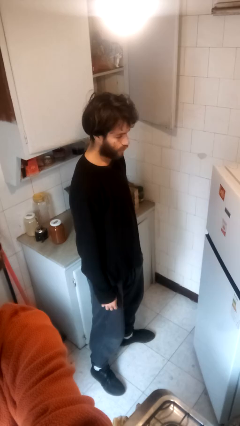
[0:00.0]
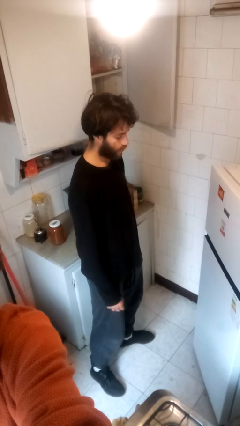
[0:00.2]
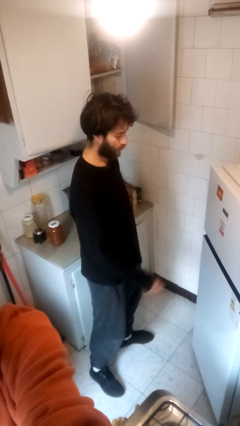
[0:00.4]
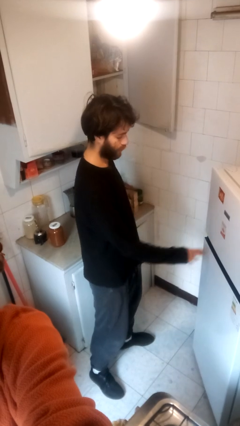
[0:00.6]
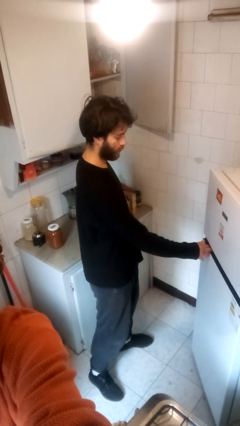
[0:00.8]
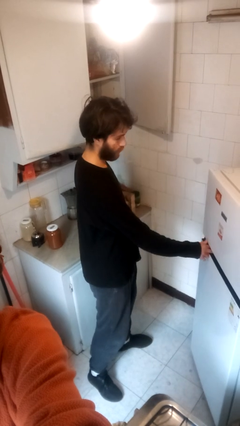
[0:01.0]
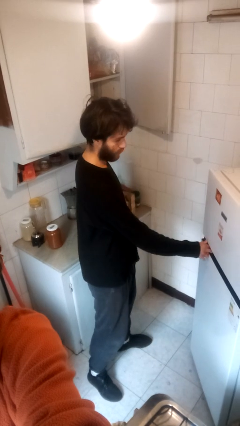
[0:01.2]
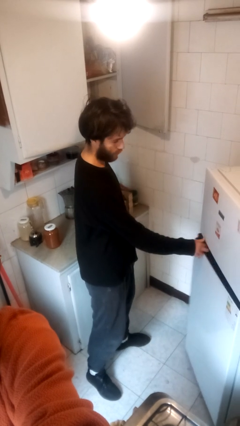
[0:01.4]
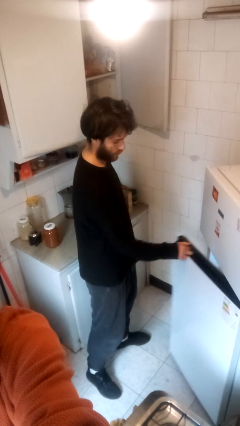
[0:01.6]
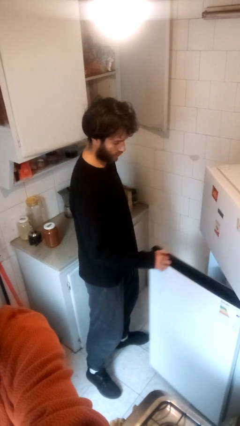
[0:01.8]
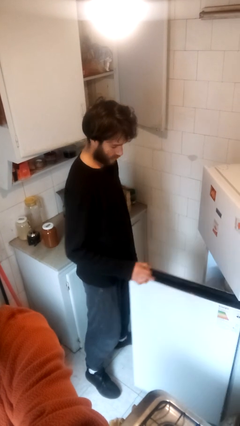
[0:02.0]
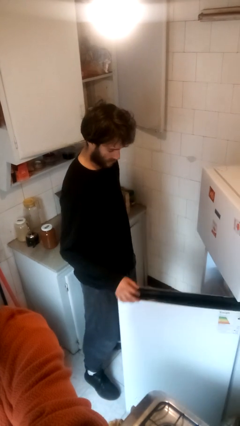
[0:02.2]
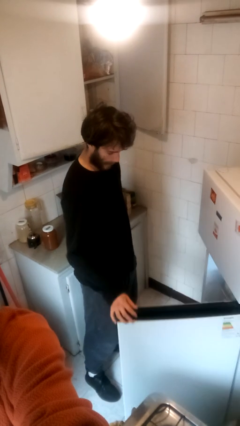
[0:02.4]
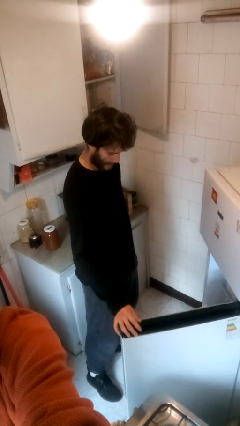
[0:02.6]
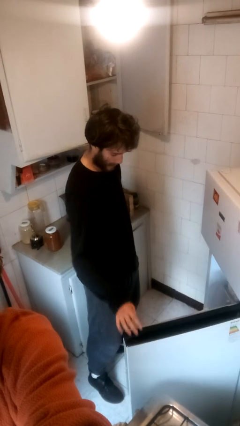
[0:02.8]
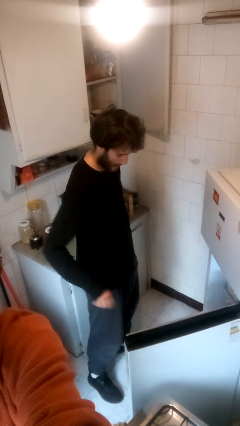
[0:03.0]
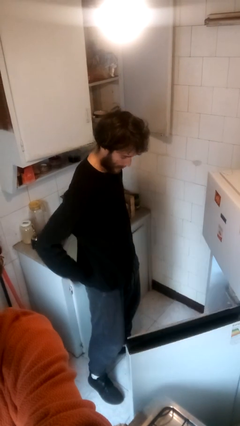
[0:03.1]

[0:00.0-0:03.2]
person opens refrigerator

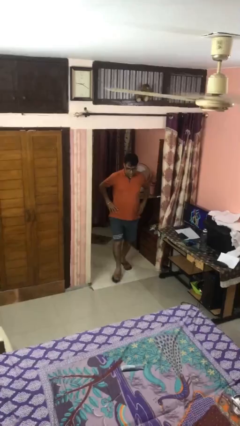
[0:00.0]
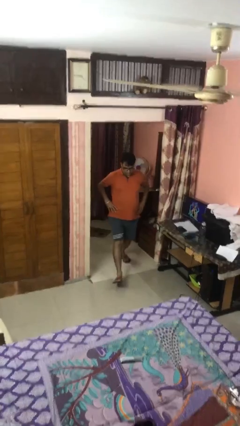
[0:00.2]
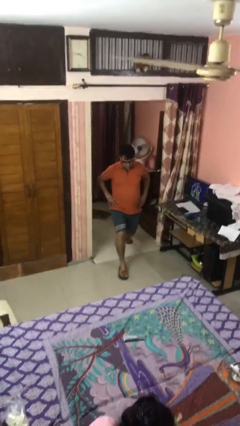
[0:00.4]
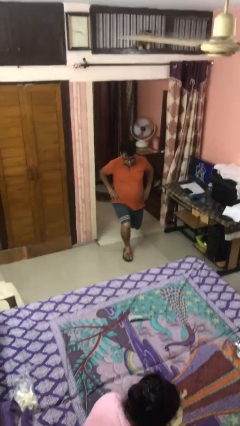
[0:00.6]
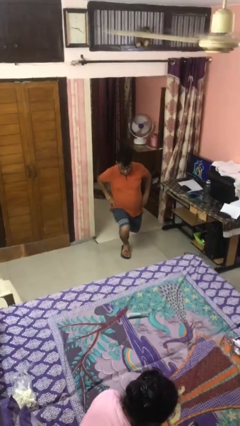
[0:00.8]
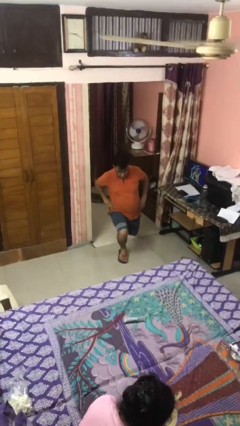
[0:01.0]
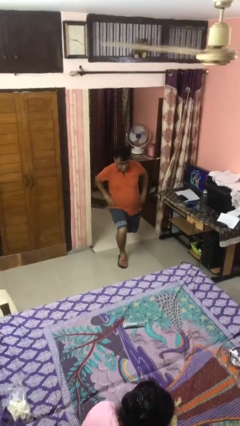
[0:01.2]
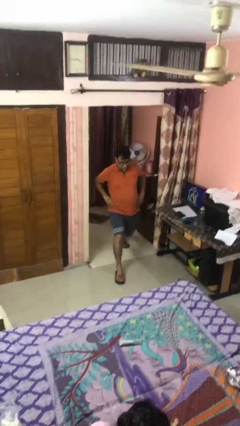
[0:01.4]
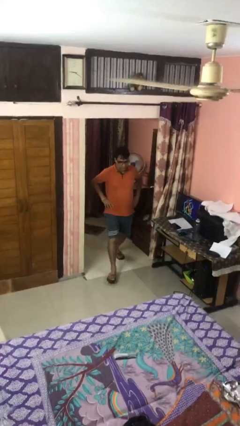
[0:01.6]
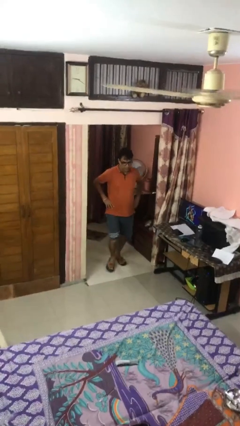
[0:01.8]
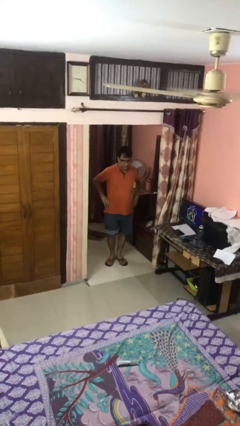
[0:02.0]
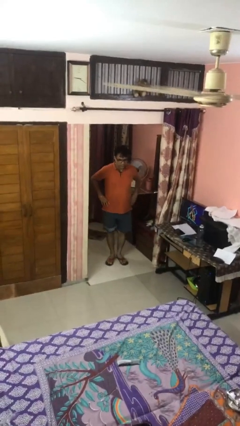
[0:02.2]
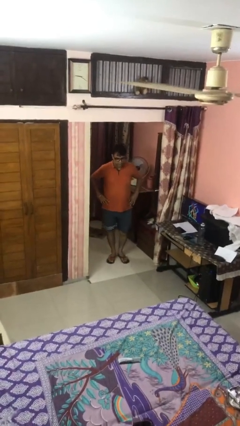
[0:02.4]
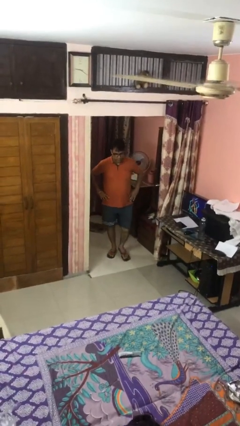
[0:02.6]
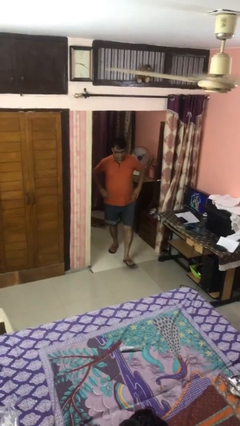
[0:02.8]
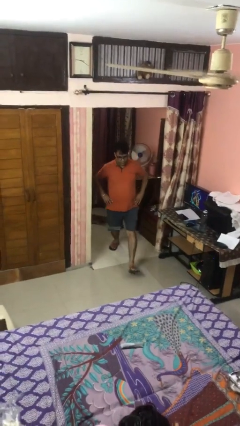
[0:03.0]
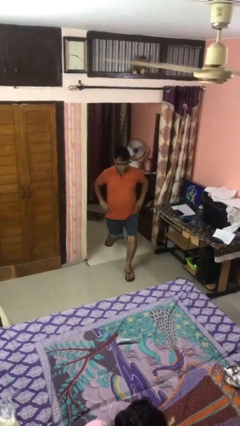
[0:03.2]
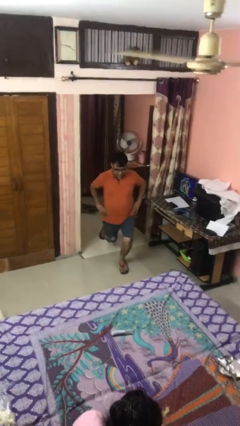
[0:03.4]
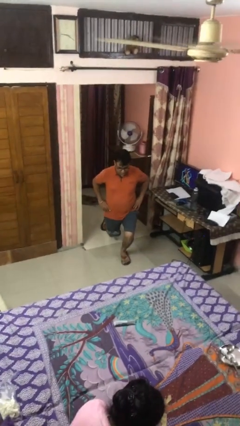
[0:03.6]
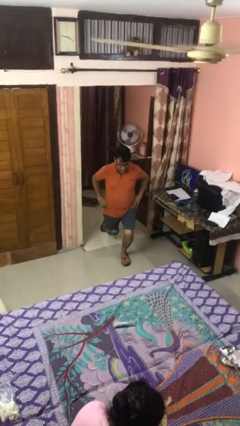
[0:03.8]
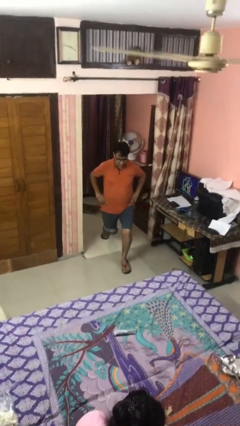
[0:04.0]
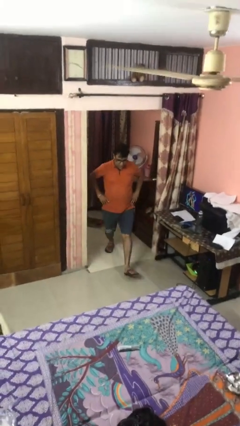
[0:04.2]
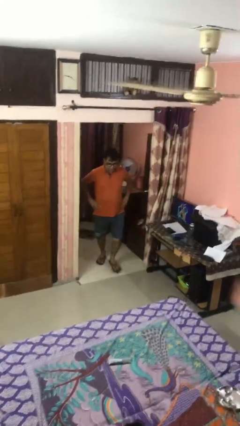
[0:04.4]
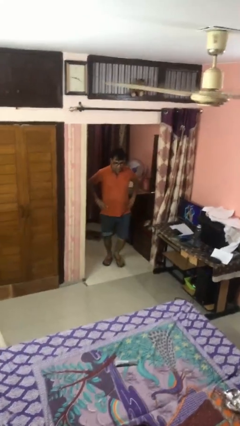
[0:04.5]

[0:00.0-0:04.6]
person exercises with lunges

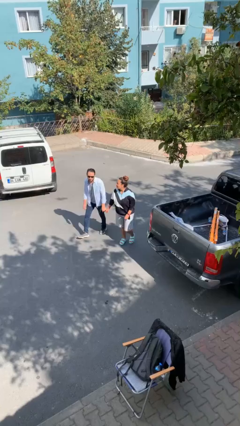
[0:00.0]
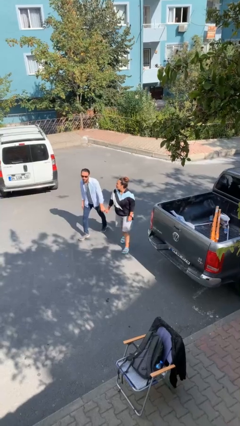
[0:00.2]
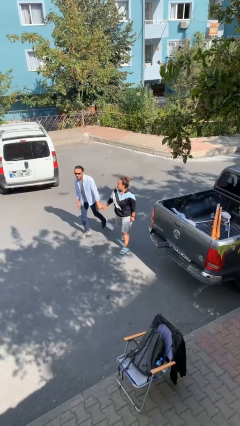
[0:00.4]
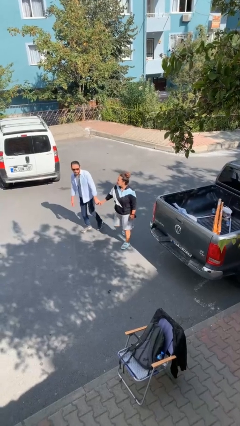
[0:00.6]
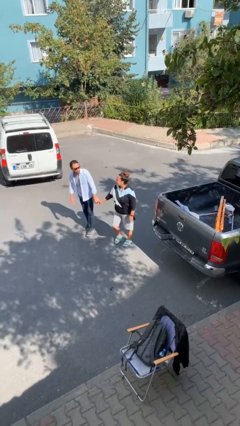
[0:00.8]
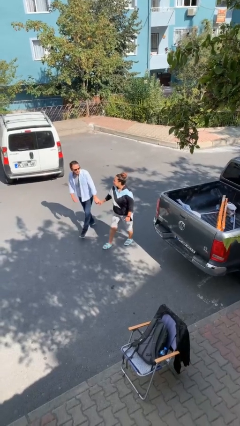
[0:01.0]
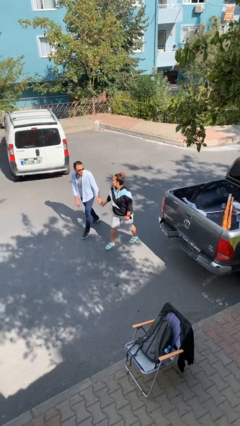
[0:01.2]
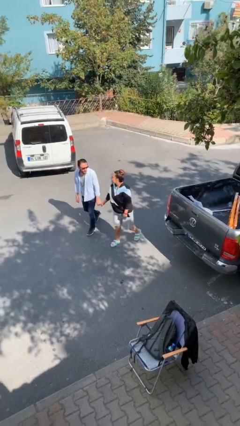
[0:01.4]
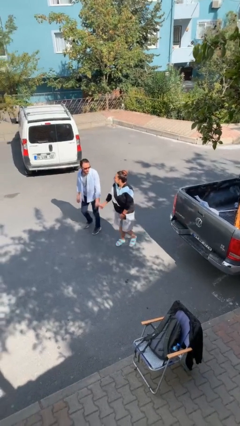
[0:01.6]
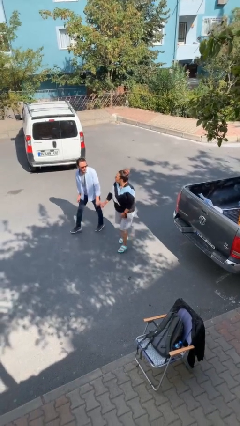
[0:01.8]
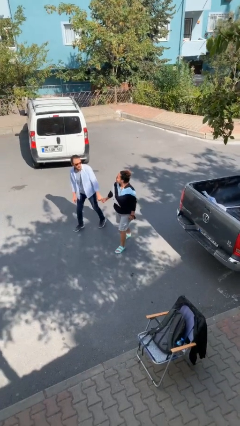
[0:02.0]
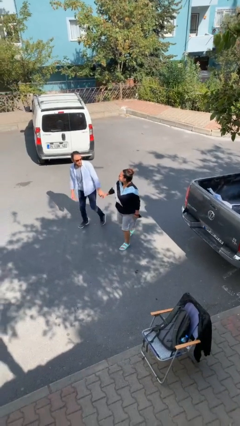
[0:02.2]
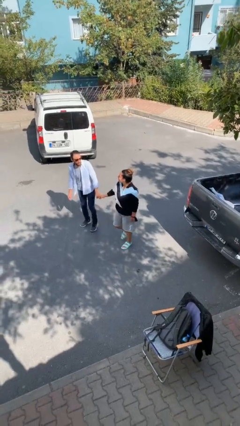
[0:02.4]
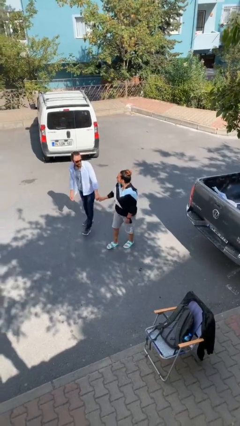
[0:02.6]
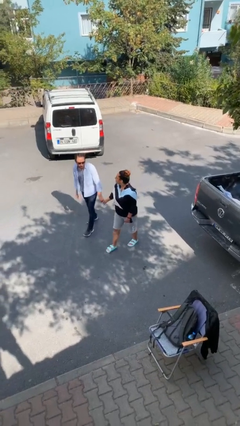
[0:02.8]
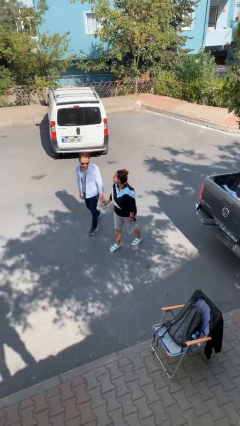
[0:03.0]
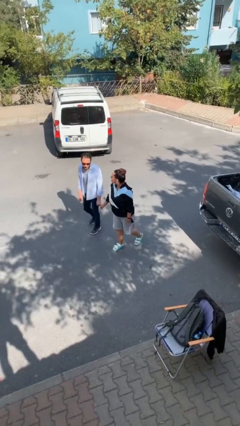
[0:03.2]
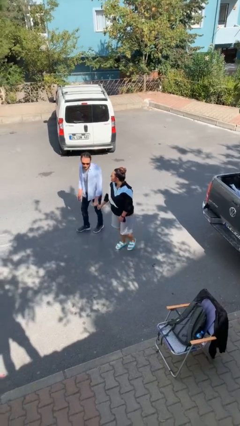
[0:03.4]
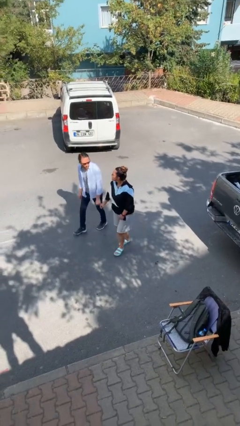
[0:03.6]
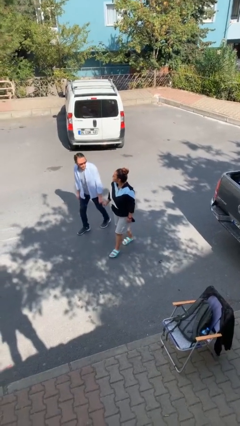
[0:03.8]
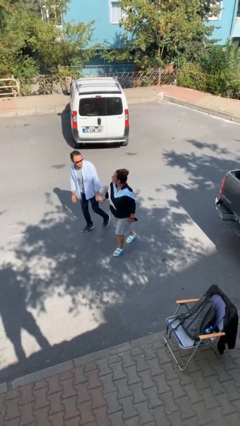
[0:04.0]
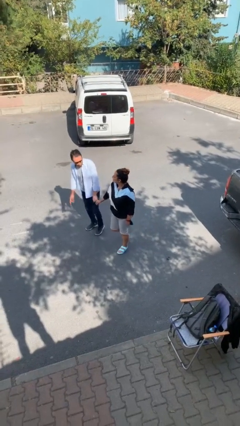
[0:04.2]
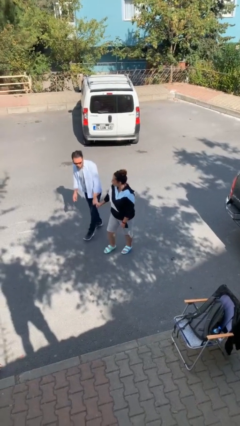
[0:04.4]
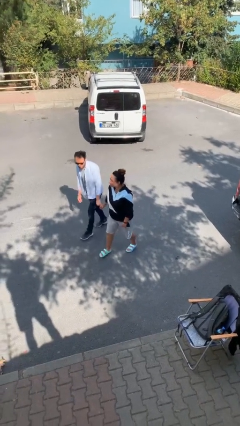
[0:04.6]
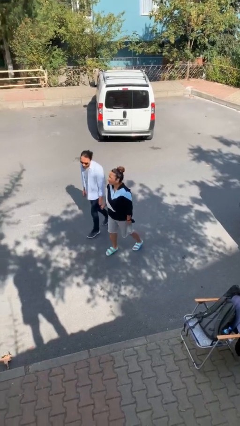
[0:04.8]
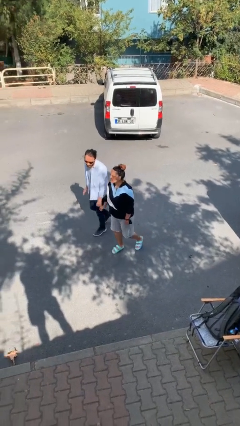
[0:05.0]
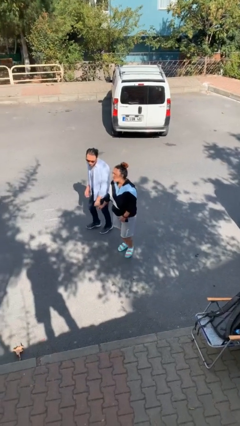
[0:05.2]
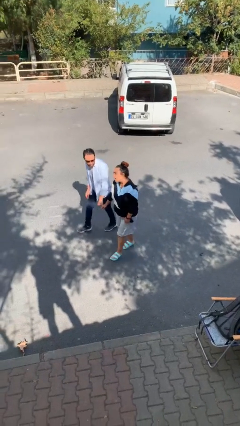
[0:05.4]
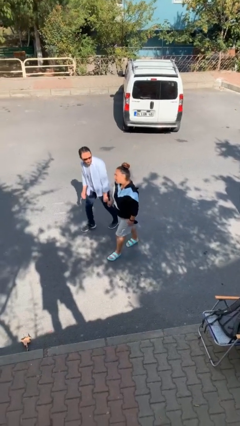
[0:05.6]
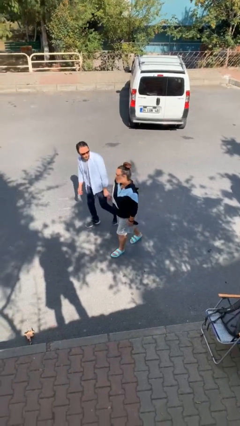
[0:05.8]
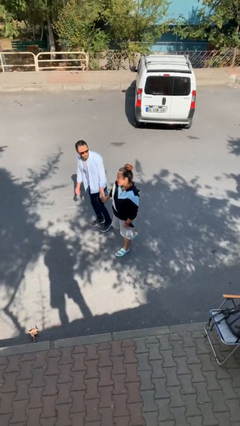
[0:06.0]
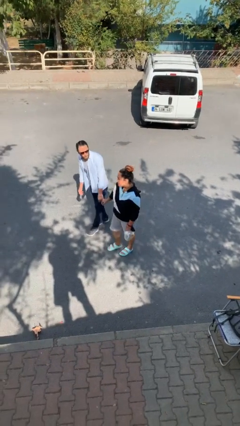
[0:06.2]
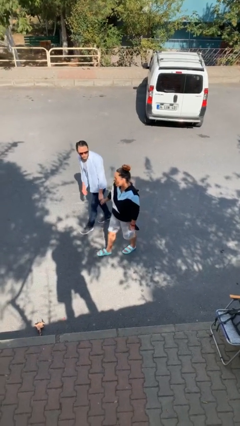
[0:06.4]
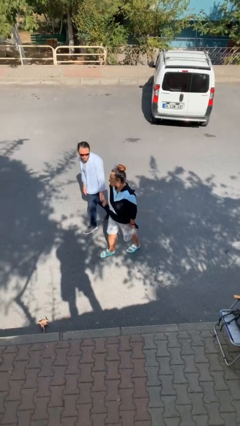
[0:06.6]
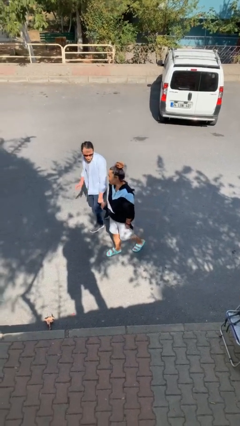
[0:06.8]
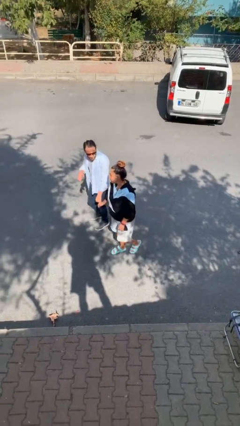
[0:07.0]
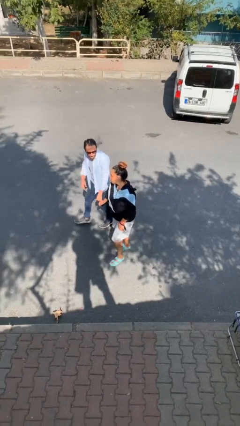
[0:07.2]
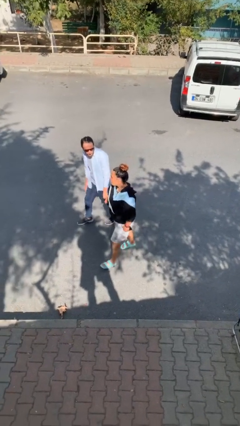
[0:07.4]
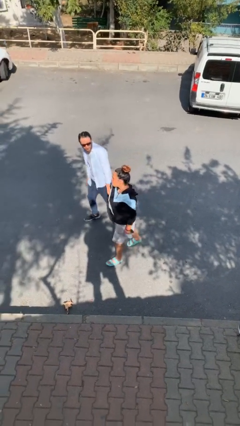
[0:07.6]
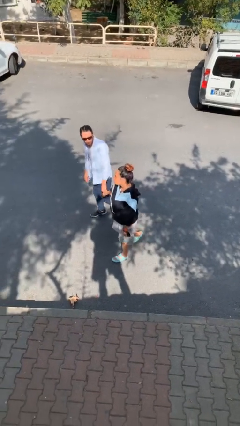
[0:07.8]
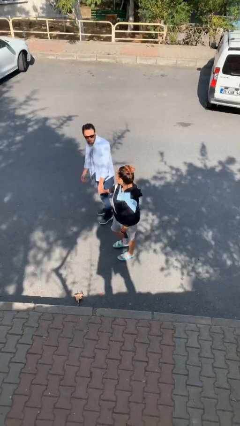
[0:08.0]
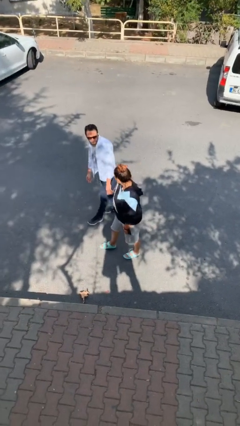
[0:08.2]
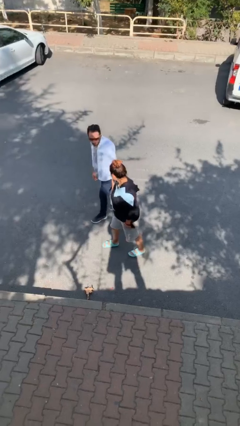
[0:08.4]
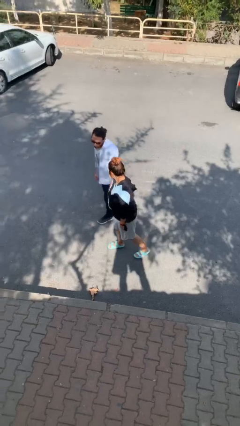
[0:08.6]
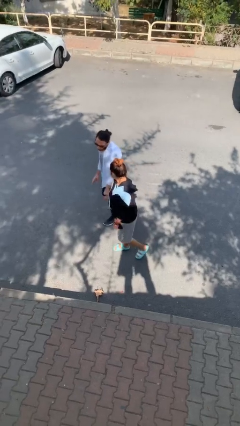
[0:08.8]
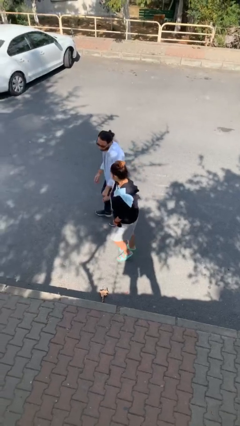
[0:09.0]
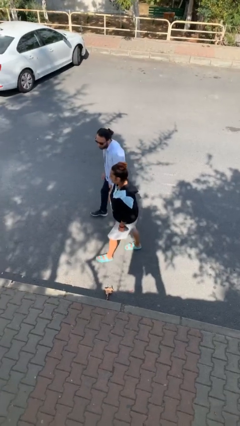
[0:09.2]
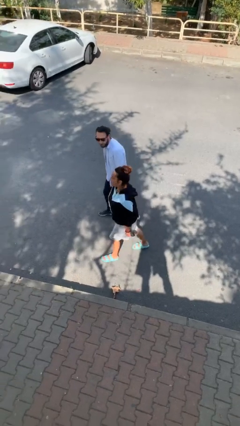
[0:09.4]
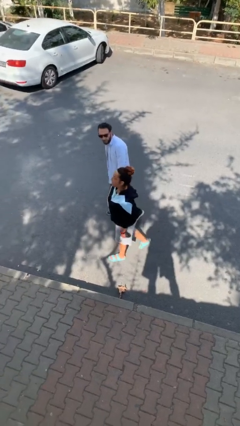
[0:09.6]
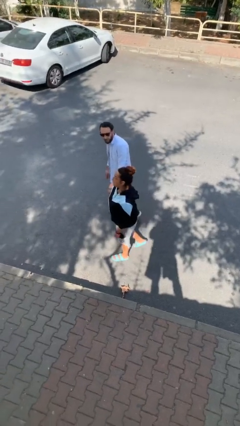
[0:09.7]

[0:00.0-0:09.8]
person holds hand
